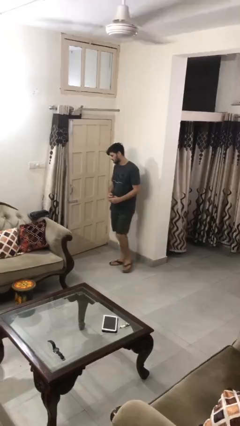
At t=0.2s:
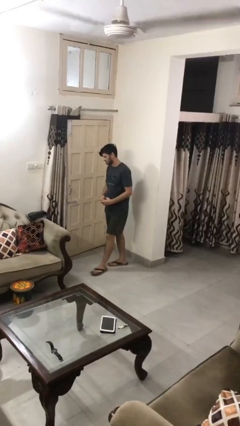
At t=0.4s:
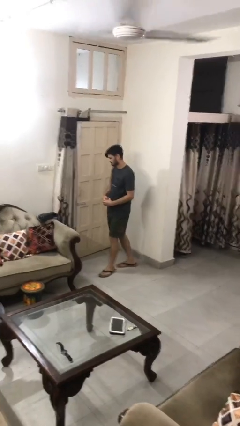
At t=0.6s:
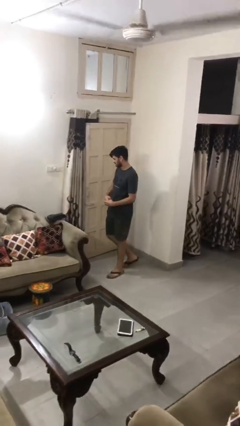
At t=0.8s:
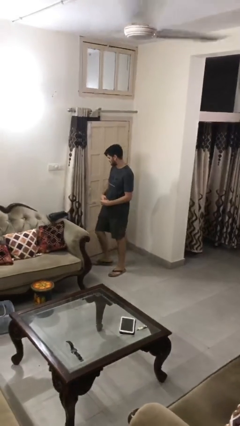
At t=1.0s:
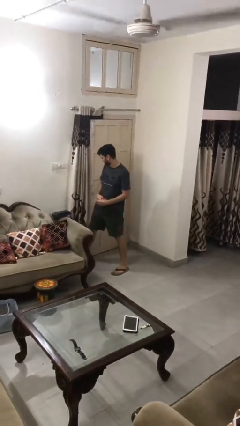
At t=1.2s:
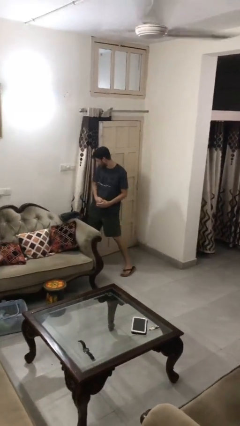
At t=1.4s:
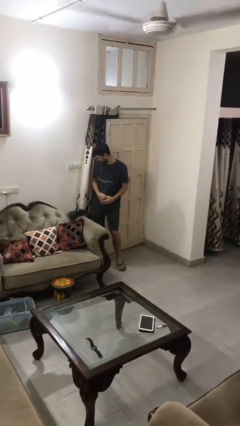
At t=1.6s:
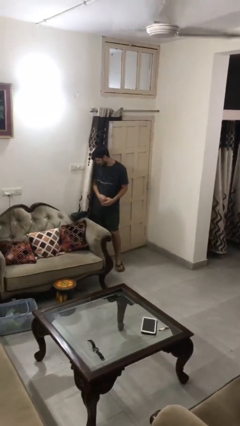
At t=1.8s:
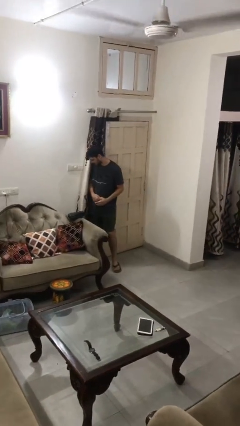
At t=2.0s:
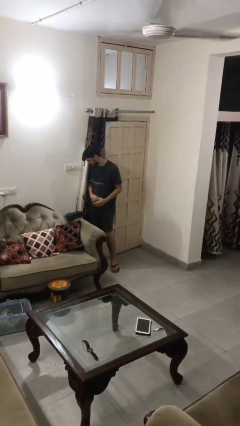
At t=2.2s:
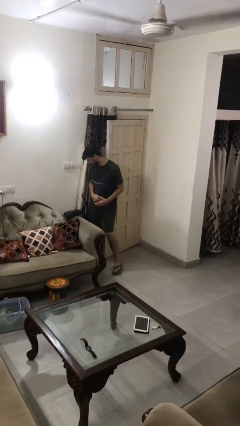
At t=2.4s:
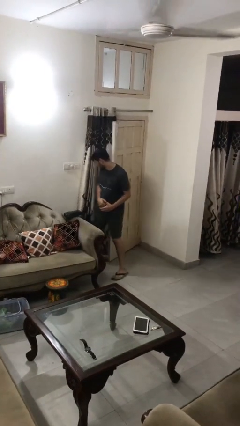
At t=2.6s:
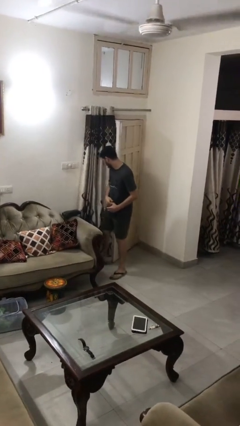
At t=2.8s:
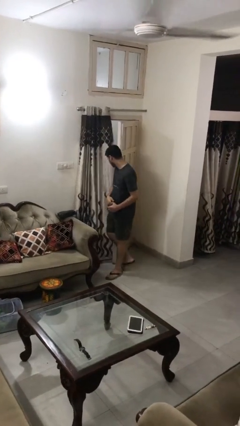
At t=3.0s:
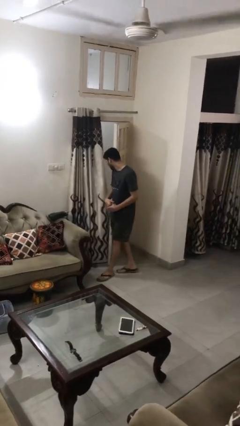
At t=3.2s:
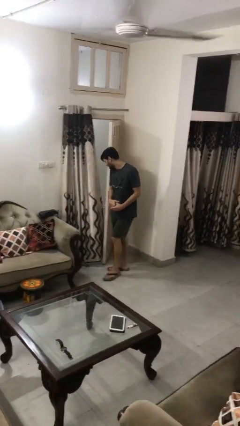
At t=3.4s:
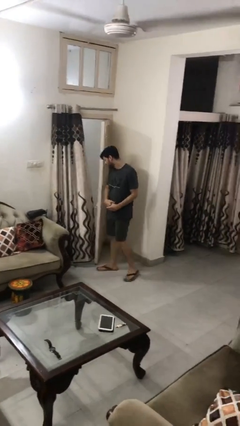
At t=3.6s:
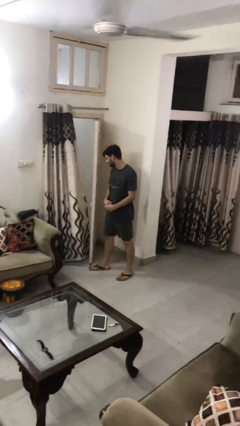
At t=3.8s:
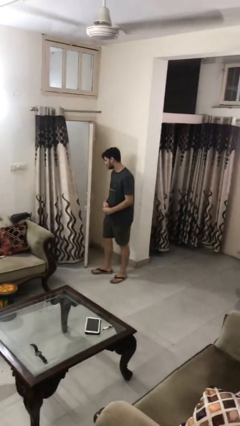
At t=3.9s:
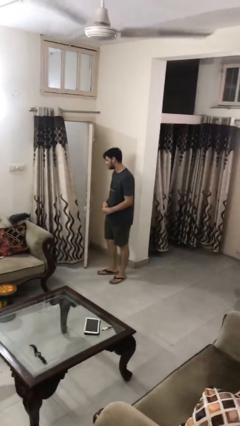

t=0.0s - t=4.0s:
person opens facility door

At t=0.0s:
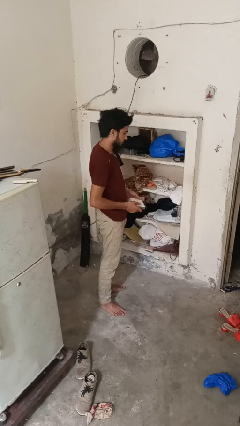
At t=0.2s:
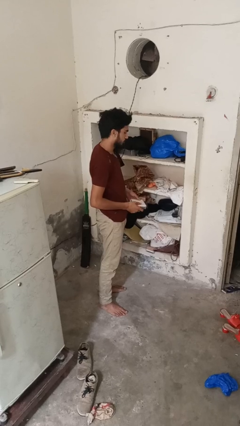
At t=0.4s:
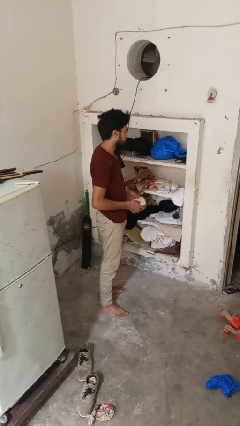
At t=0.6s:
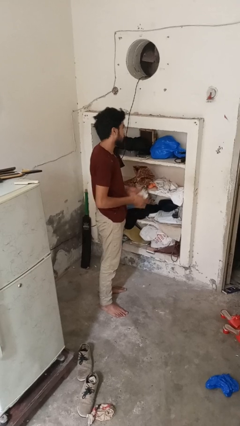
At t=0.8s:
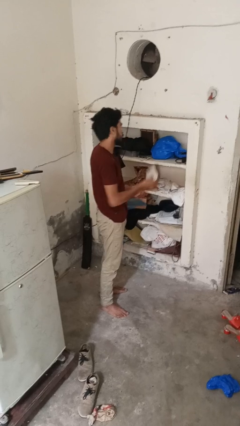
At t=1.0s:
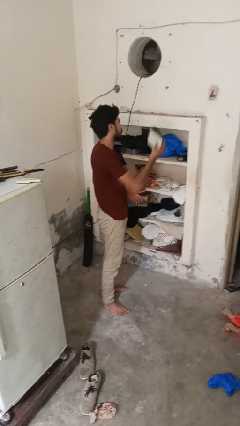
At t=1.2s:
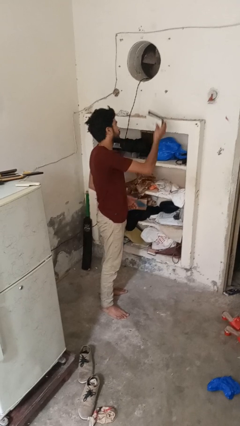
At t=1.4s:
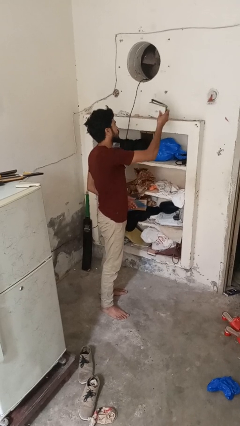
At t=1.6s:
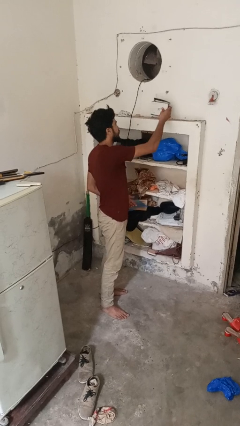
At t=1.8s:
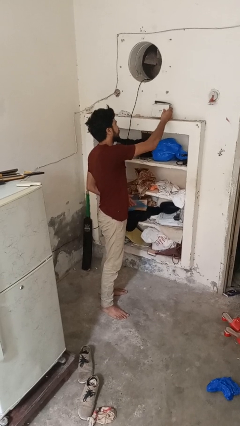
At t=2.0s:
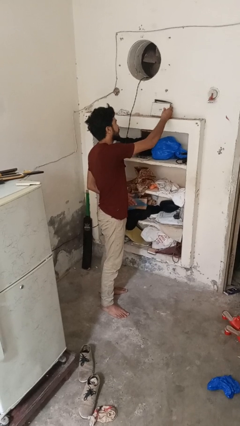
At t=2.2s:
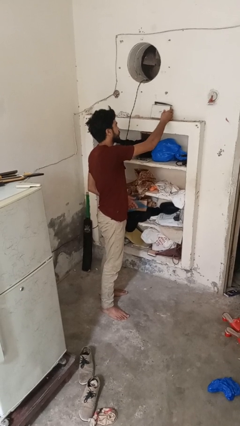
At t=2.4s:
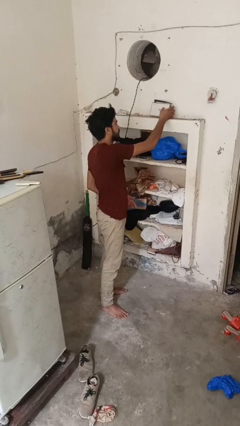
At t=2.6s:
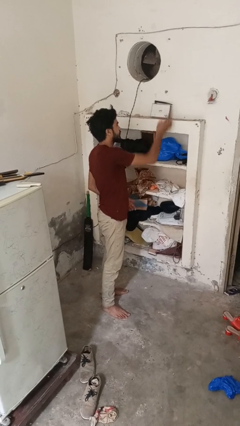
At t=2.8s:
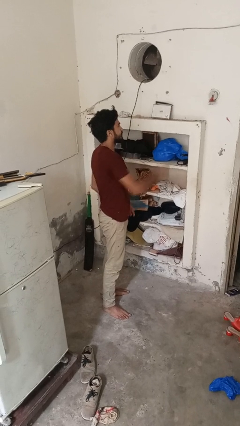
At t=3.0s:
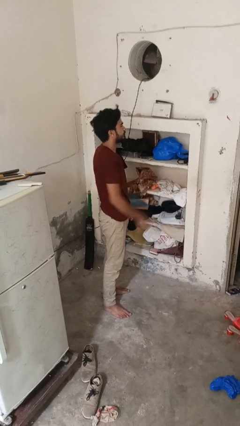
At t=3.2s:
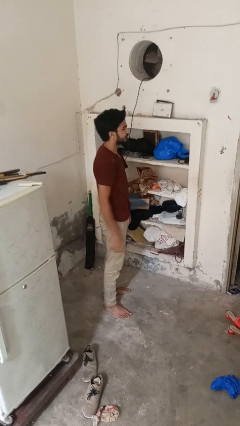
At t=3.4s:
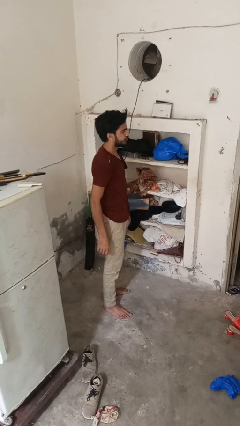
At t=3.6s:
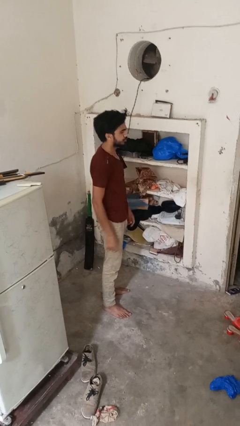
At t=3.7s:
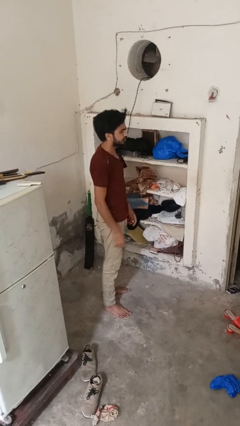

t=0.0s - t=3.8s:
person puts down object on shelf

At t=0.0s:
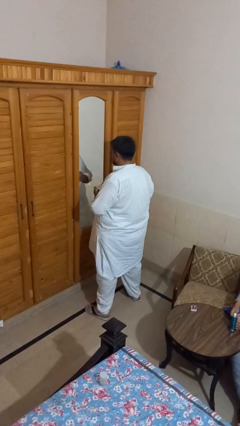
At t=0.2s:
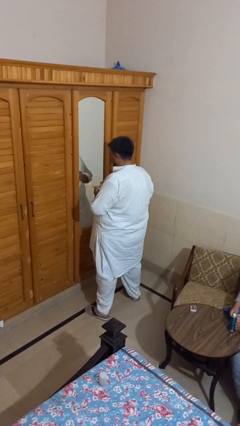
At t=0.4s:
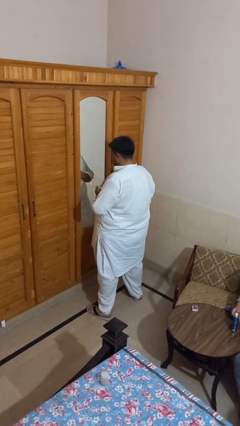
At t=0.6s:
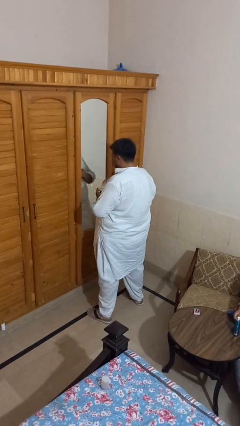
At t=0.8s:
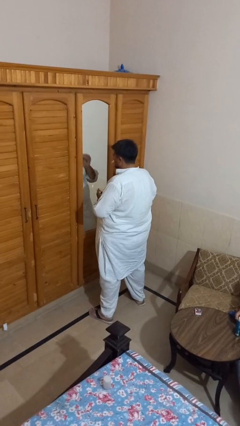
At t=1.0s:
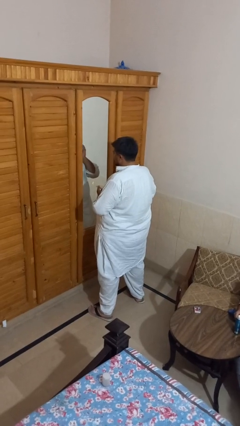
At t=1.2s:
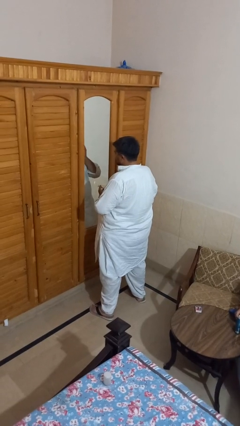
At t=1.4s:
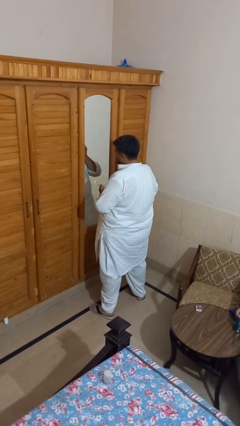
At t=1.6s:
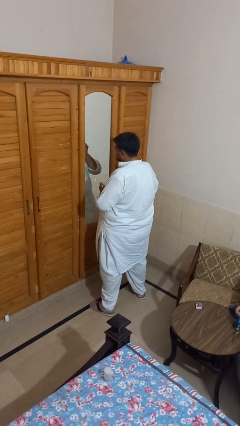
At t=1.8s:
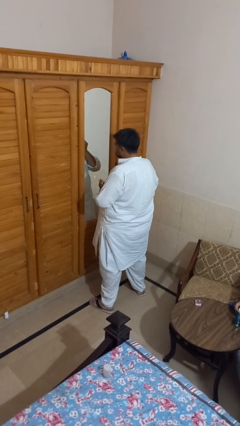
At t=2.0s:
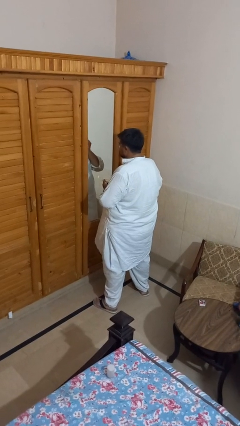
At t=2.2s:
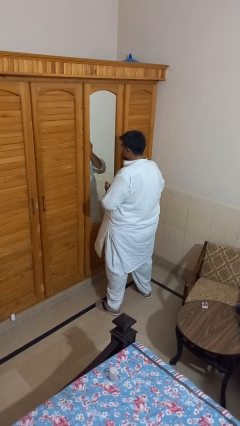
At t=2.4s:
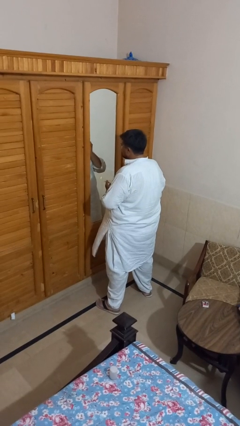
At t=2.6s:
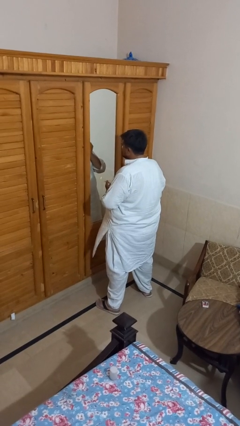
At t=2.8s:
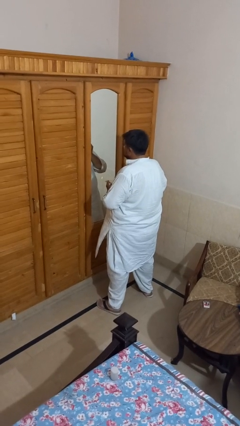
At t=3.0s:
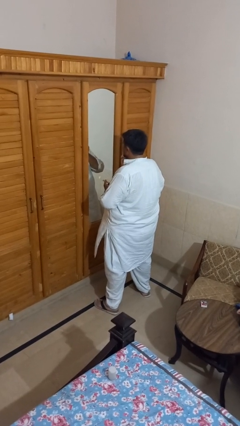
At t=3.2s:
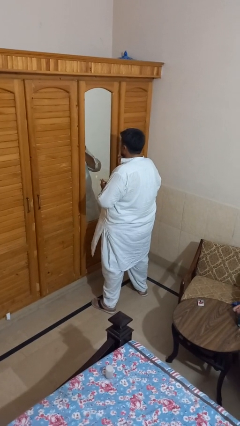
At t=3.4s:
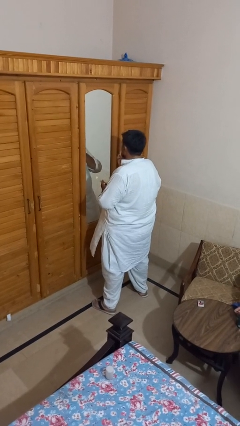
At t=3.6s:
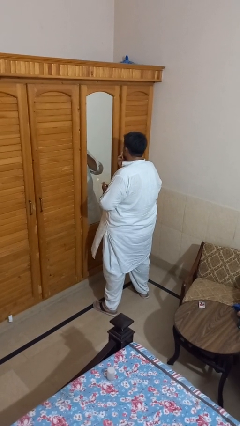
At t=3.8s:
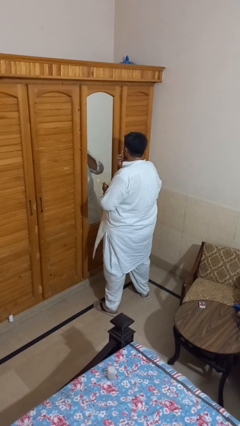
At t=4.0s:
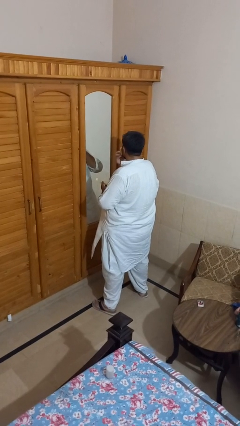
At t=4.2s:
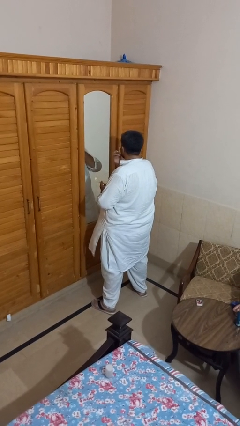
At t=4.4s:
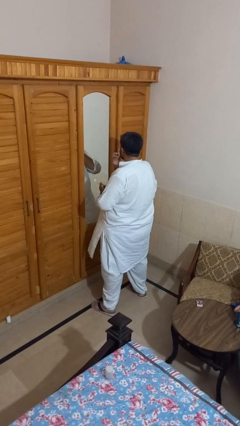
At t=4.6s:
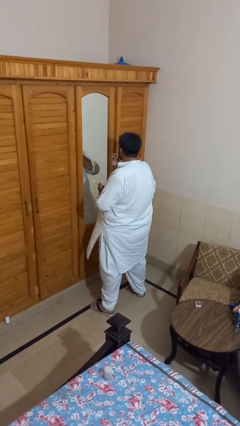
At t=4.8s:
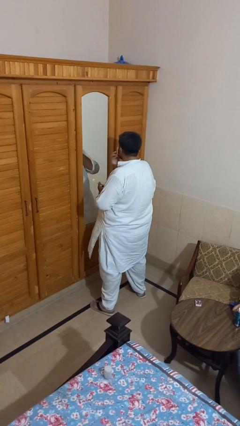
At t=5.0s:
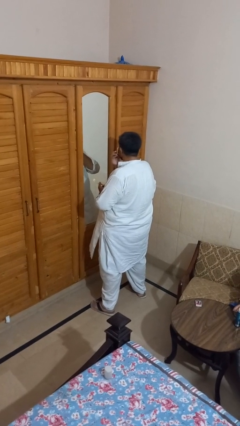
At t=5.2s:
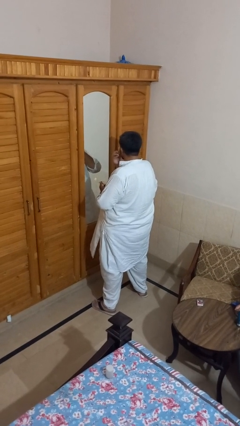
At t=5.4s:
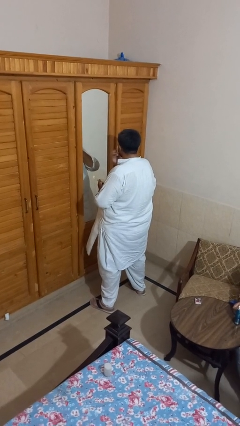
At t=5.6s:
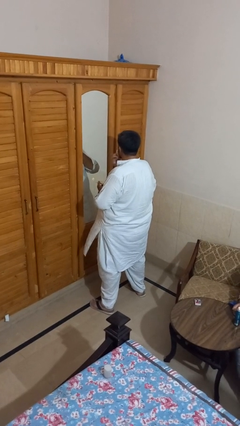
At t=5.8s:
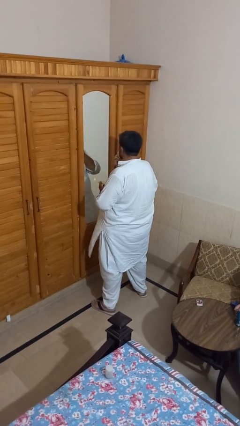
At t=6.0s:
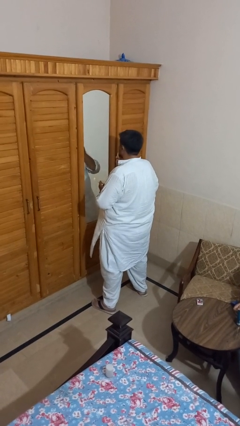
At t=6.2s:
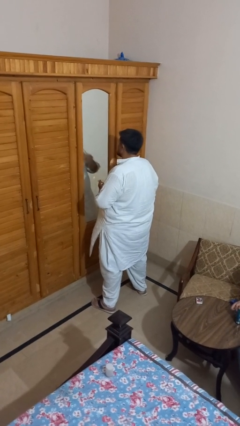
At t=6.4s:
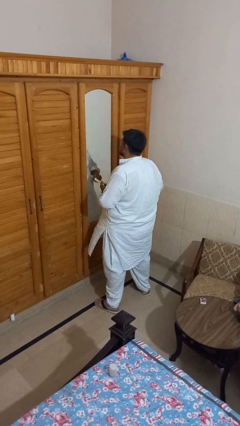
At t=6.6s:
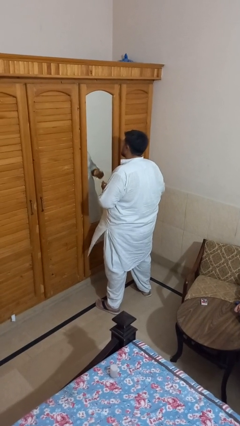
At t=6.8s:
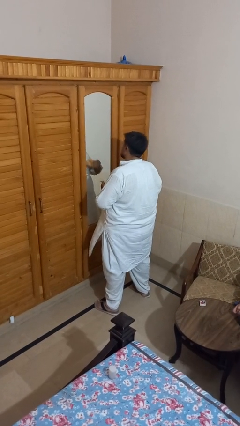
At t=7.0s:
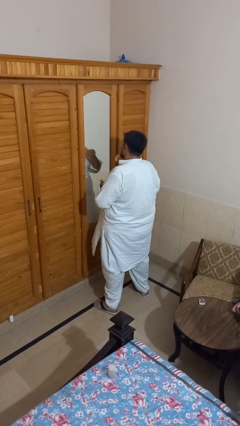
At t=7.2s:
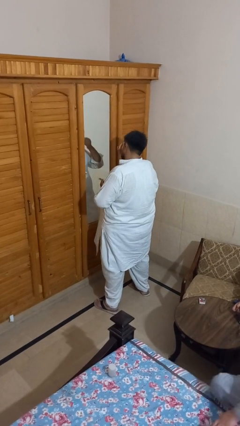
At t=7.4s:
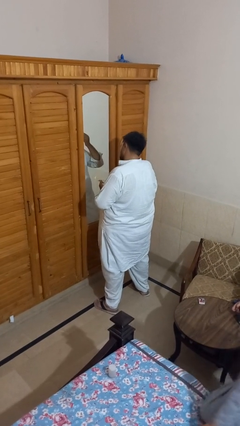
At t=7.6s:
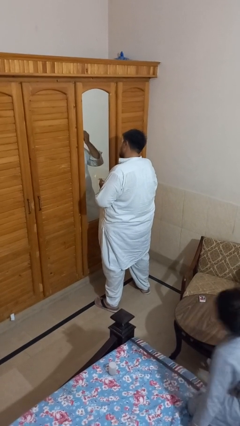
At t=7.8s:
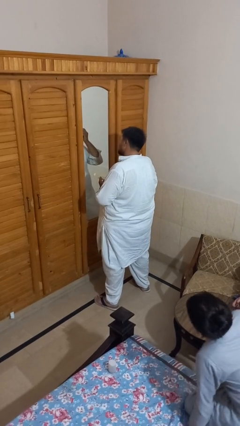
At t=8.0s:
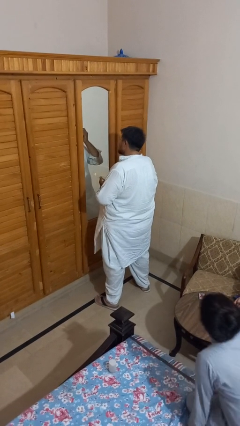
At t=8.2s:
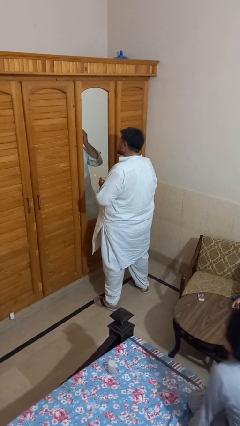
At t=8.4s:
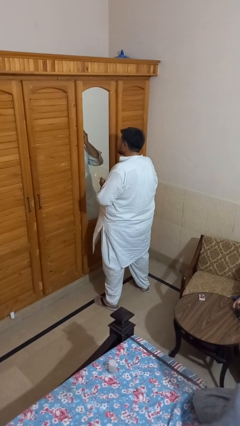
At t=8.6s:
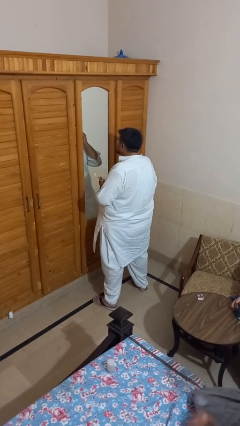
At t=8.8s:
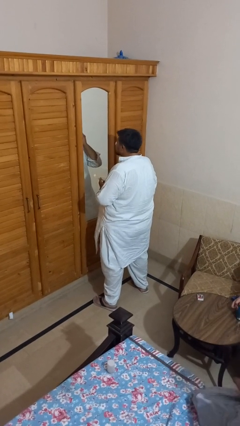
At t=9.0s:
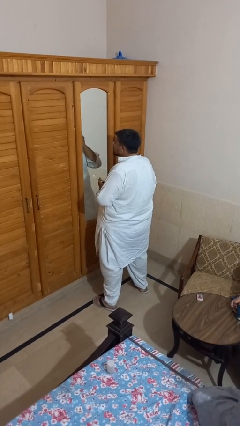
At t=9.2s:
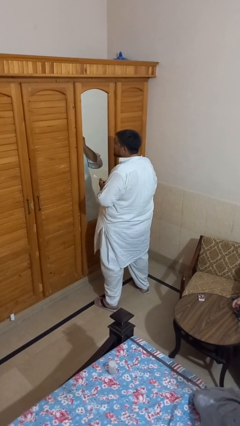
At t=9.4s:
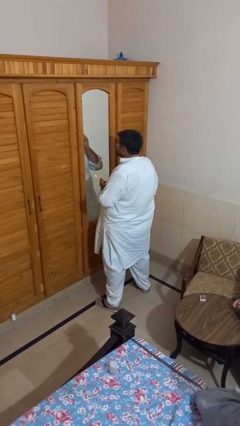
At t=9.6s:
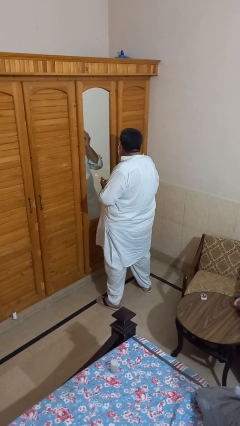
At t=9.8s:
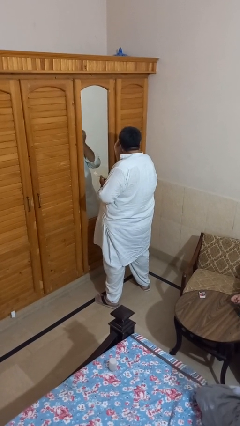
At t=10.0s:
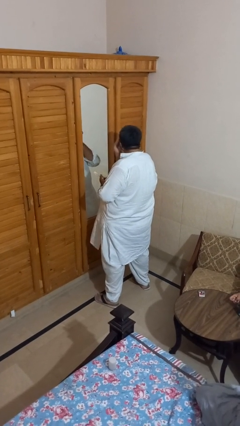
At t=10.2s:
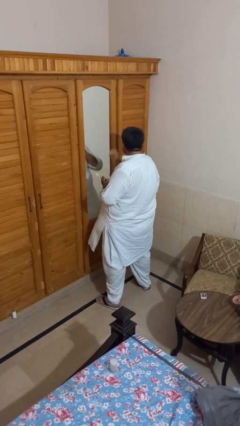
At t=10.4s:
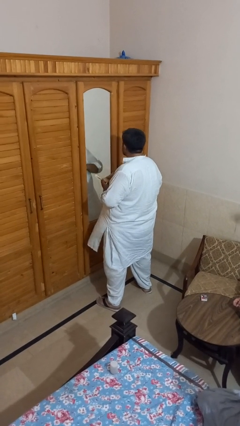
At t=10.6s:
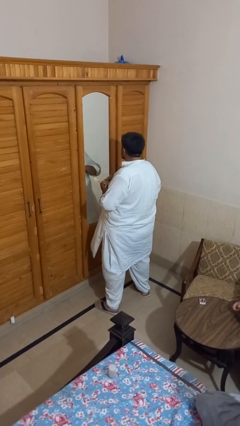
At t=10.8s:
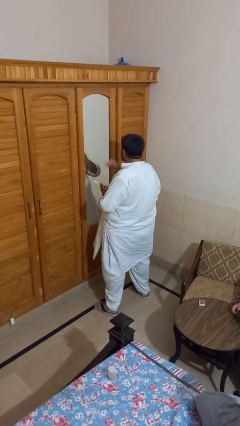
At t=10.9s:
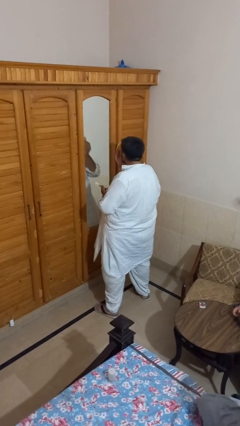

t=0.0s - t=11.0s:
person applies foundation makeup
